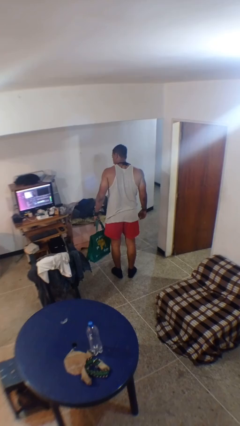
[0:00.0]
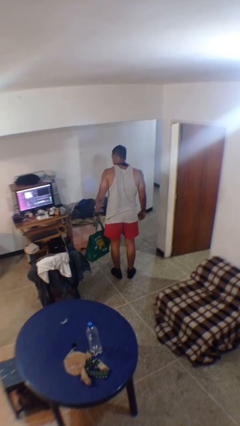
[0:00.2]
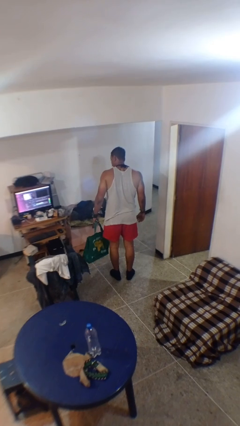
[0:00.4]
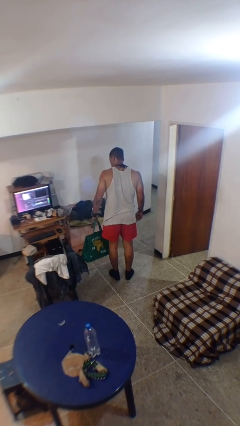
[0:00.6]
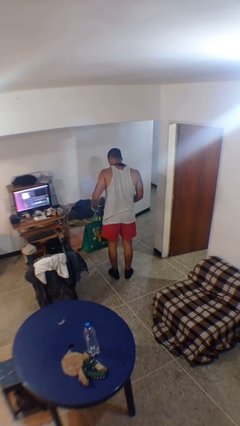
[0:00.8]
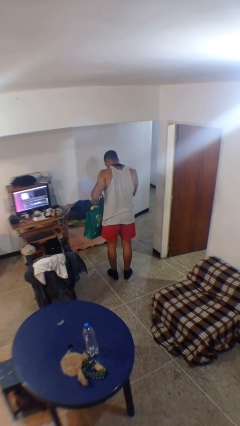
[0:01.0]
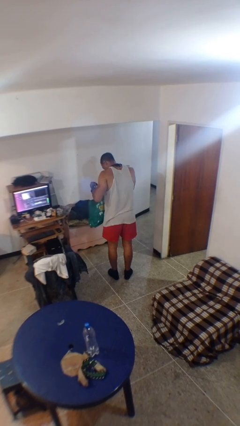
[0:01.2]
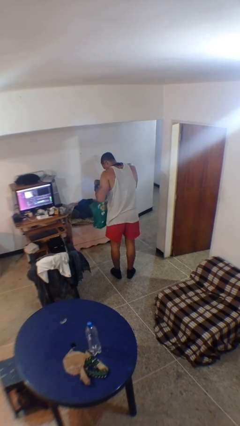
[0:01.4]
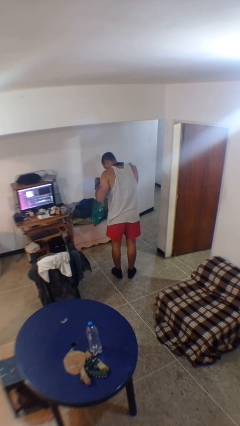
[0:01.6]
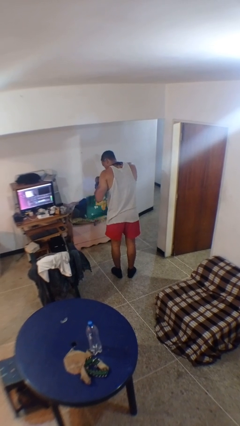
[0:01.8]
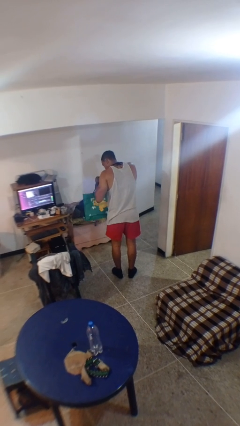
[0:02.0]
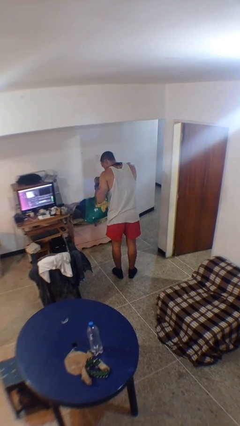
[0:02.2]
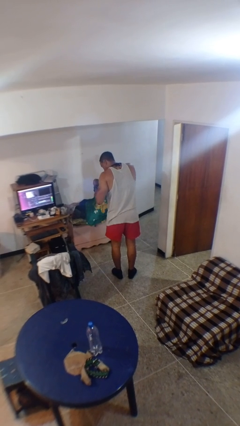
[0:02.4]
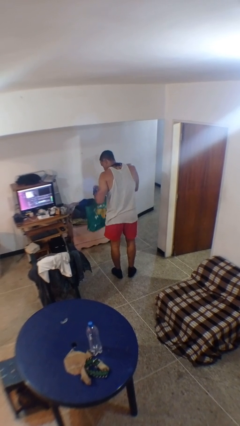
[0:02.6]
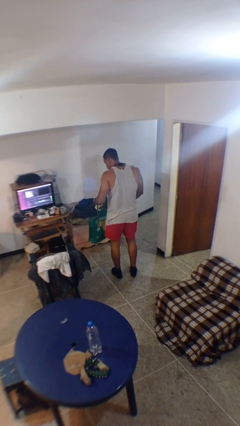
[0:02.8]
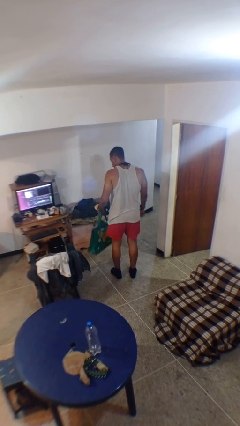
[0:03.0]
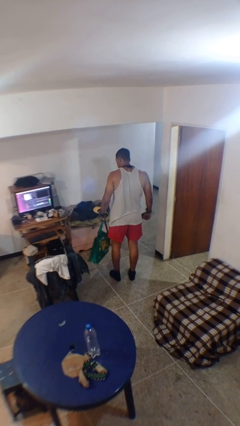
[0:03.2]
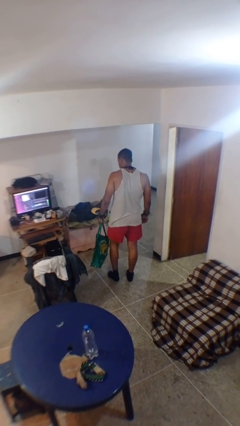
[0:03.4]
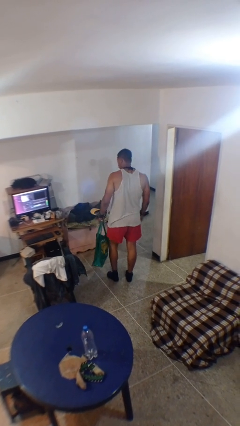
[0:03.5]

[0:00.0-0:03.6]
person searches in bag

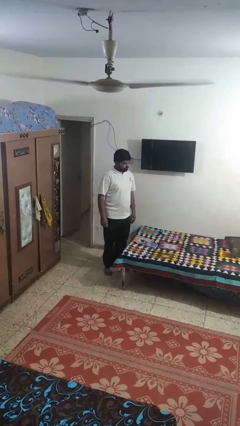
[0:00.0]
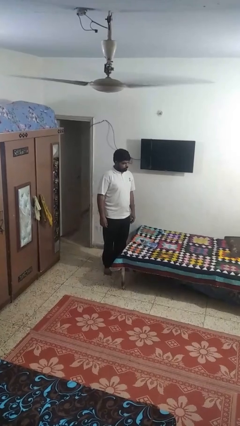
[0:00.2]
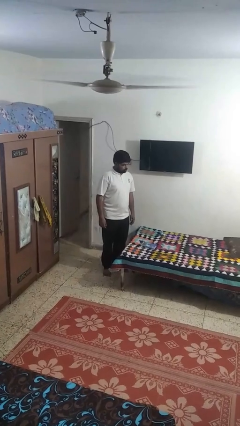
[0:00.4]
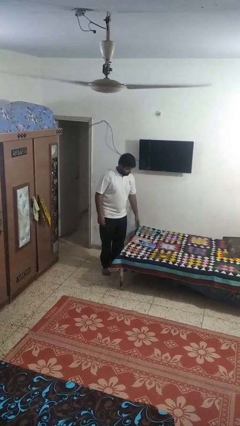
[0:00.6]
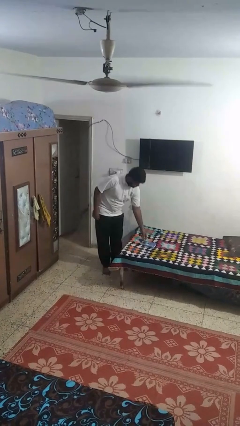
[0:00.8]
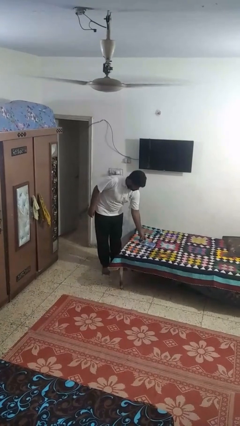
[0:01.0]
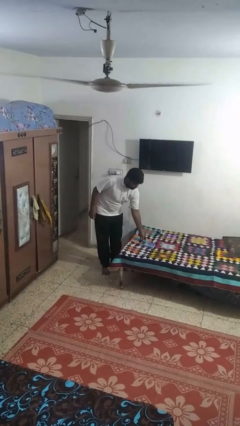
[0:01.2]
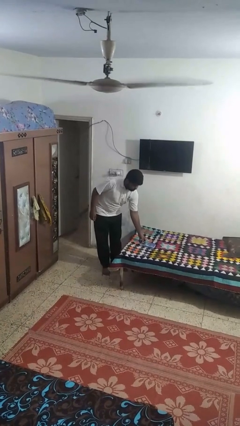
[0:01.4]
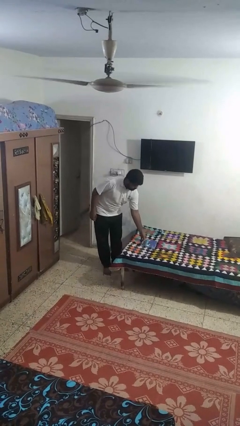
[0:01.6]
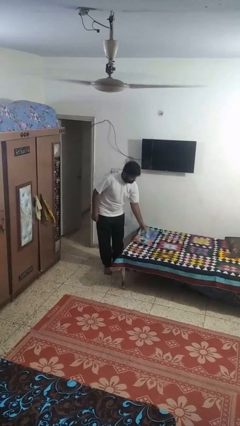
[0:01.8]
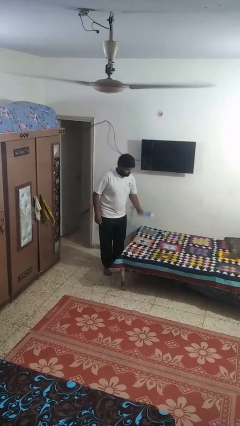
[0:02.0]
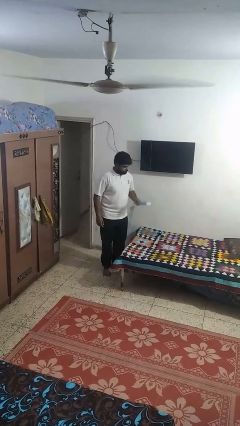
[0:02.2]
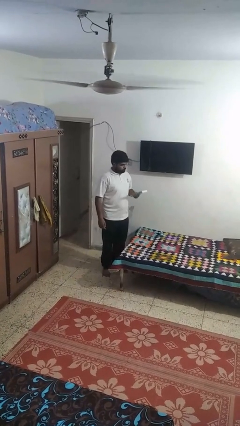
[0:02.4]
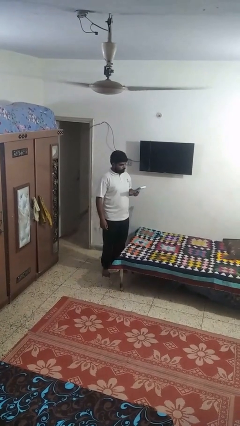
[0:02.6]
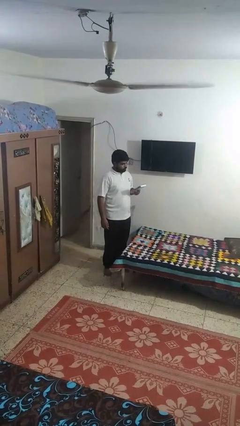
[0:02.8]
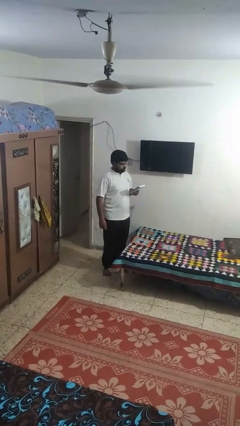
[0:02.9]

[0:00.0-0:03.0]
person picks up object from bed

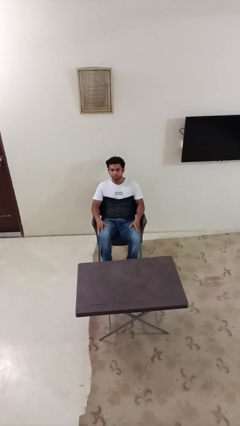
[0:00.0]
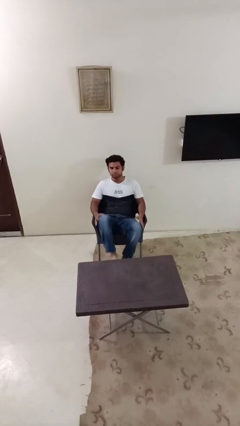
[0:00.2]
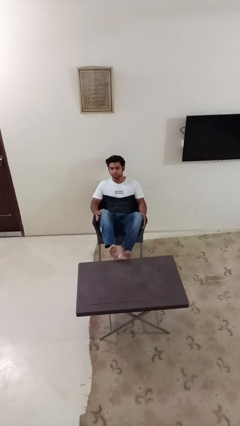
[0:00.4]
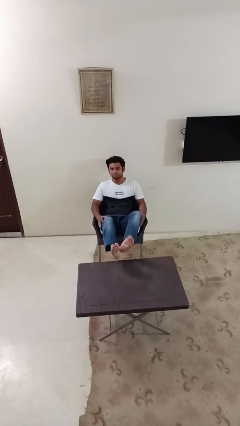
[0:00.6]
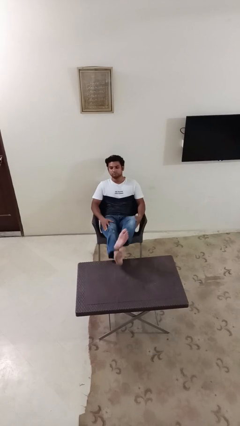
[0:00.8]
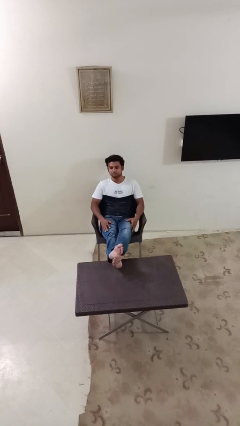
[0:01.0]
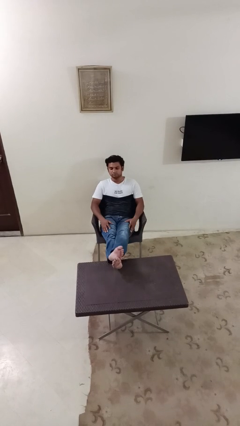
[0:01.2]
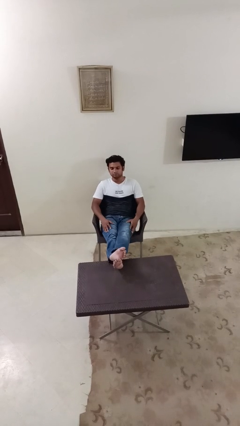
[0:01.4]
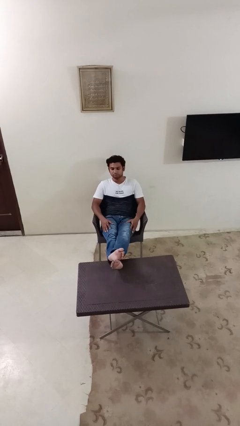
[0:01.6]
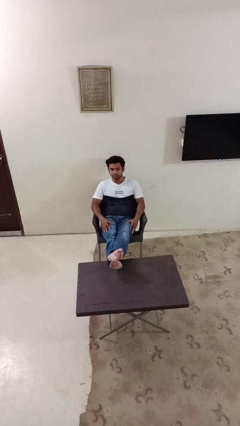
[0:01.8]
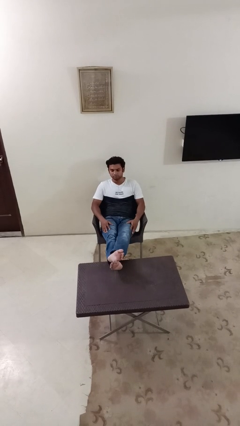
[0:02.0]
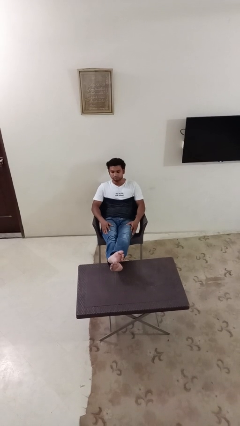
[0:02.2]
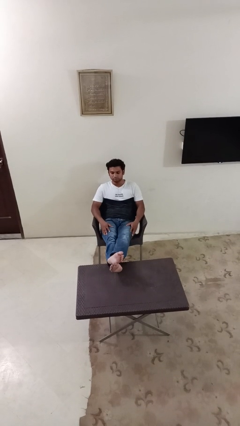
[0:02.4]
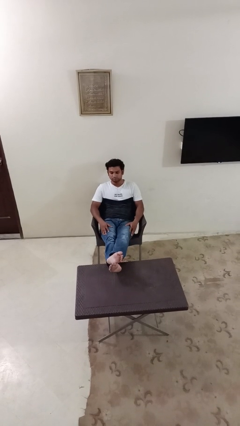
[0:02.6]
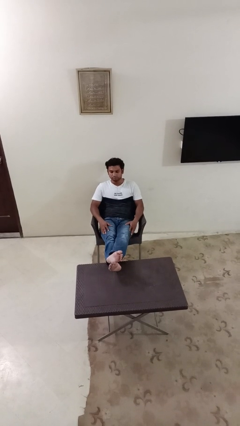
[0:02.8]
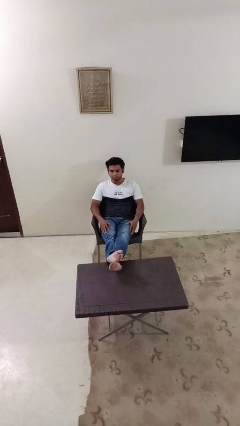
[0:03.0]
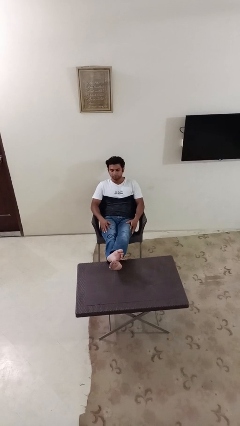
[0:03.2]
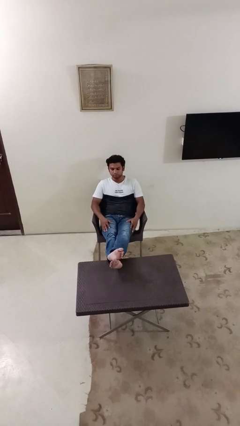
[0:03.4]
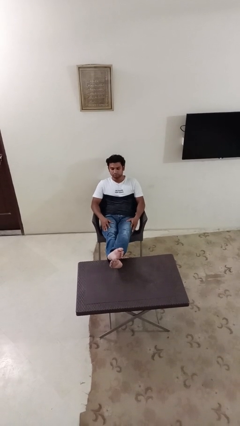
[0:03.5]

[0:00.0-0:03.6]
person puts feet up

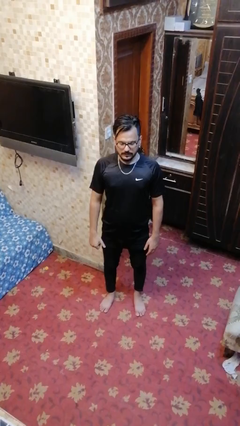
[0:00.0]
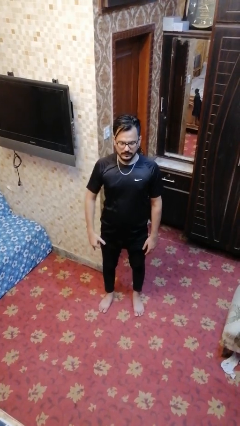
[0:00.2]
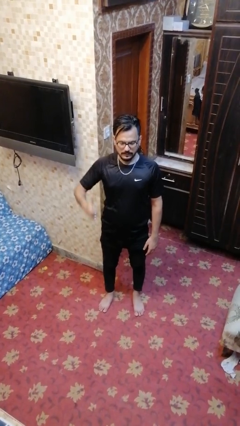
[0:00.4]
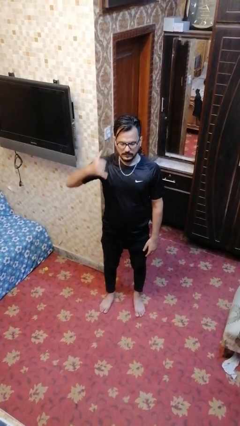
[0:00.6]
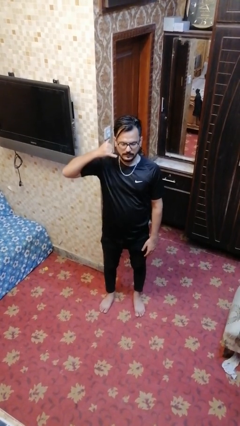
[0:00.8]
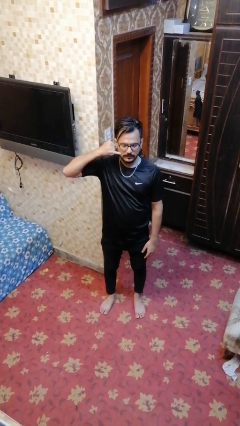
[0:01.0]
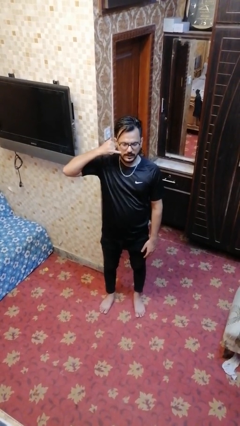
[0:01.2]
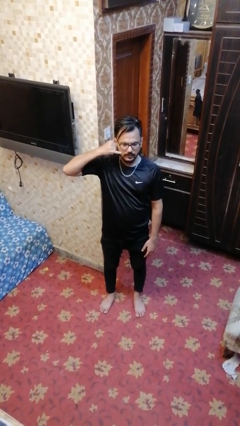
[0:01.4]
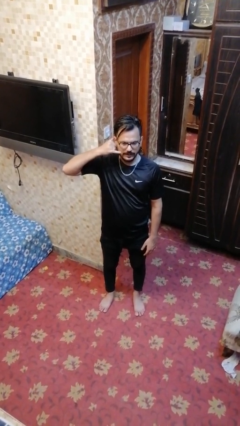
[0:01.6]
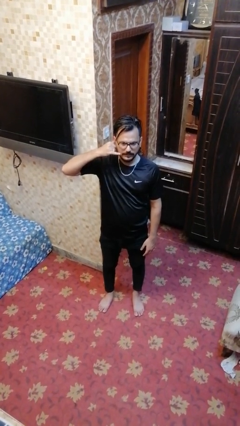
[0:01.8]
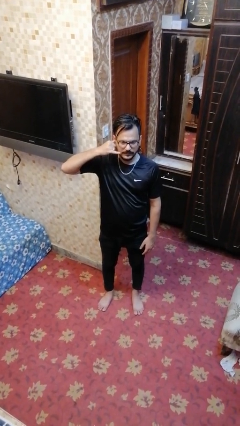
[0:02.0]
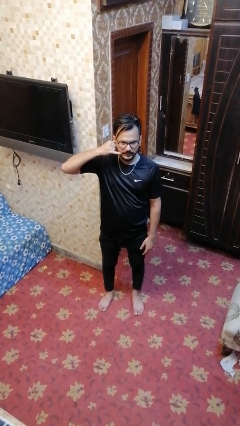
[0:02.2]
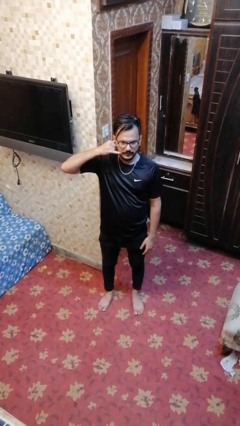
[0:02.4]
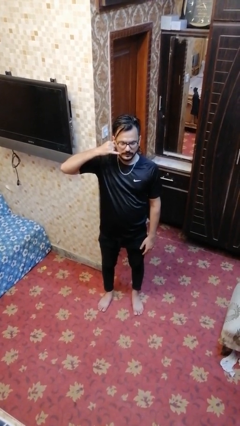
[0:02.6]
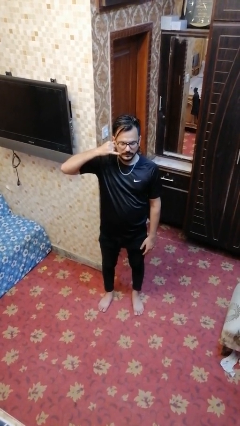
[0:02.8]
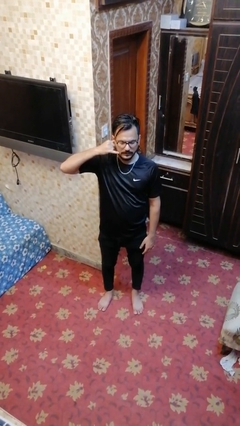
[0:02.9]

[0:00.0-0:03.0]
person gestures call me

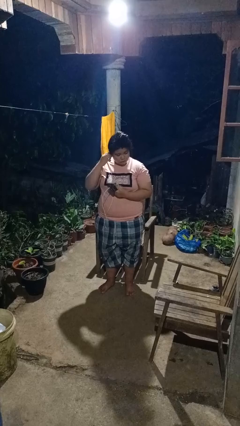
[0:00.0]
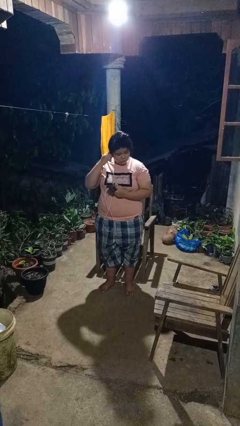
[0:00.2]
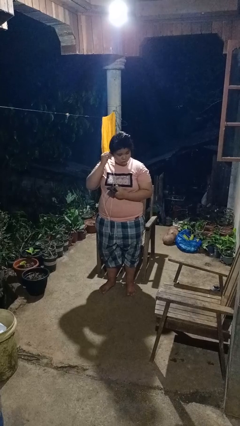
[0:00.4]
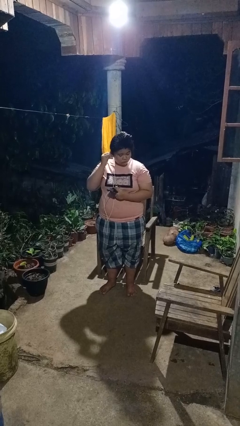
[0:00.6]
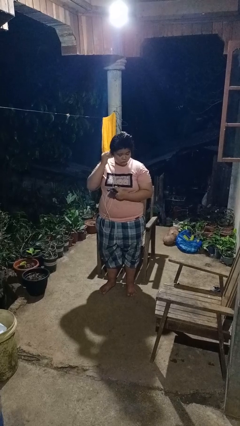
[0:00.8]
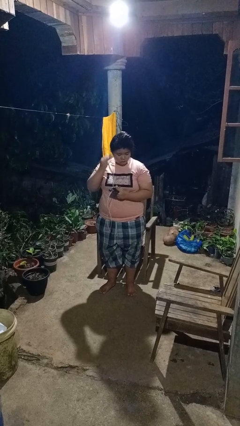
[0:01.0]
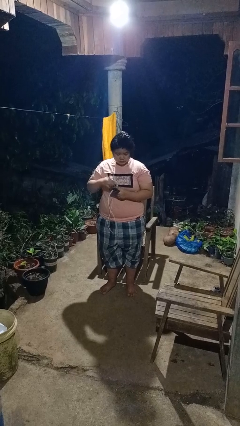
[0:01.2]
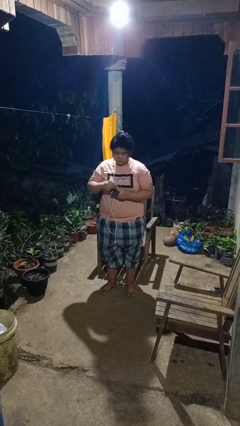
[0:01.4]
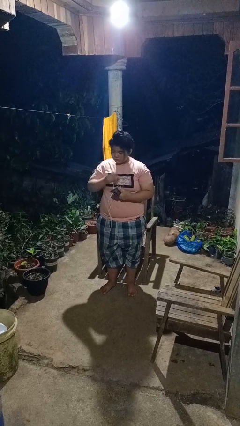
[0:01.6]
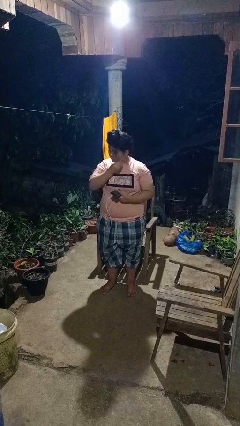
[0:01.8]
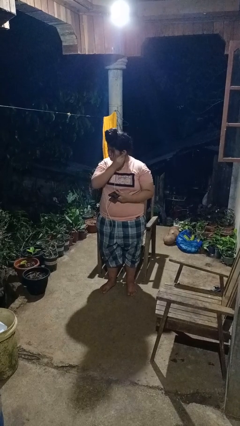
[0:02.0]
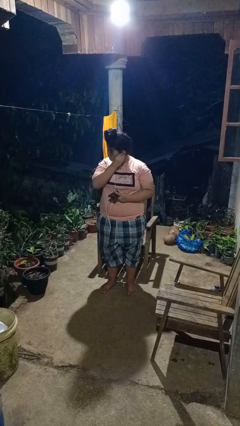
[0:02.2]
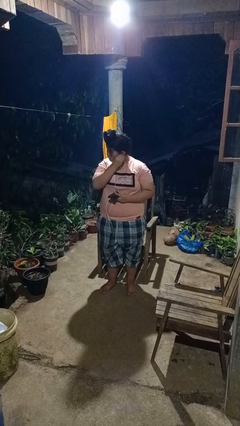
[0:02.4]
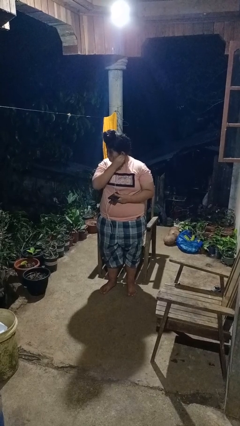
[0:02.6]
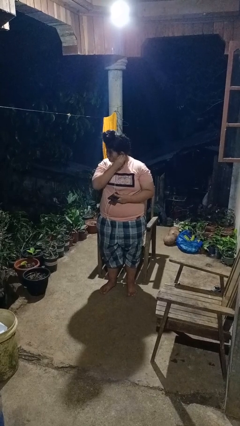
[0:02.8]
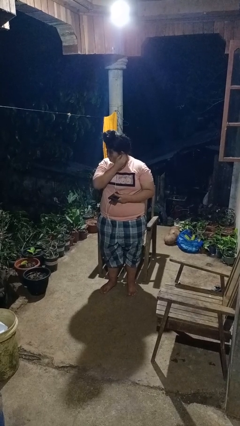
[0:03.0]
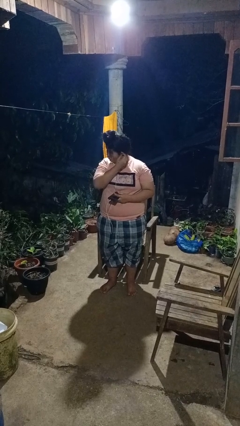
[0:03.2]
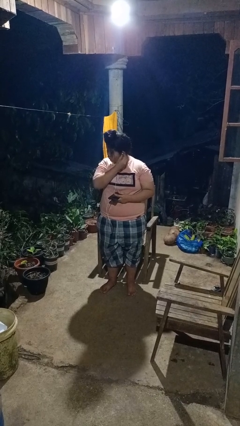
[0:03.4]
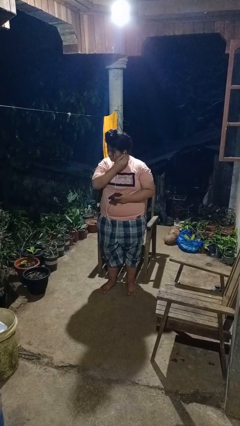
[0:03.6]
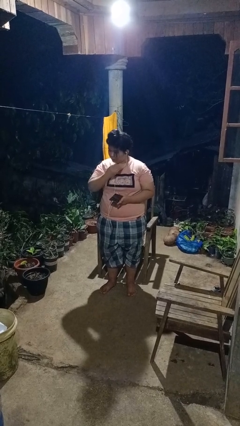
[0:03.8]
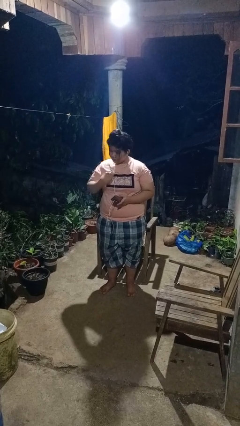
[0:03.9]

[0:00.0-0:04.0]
person puts on headphones

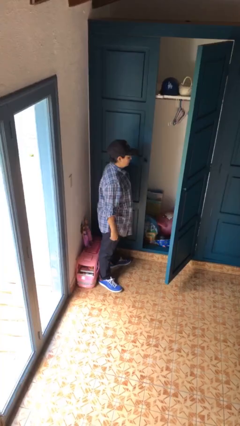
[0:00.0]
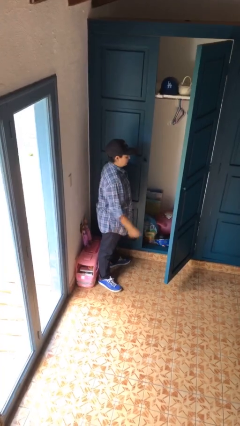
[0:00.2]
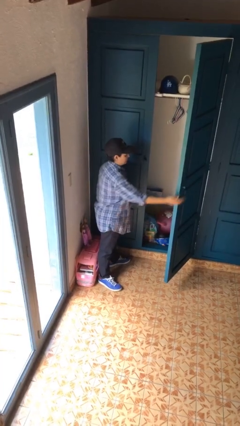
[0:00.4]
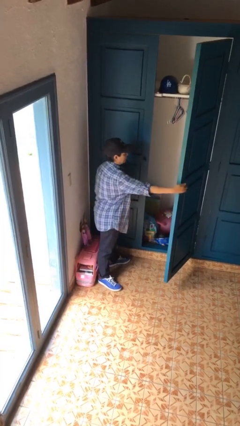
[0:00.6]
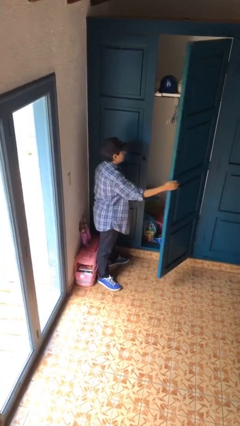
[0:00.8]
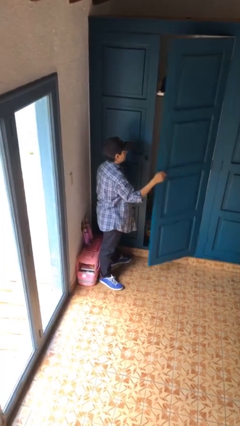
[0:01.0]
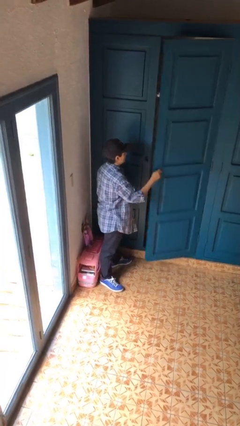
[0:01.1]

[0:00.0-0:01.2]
person closes closet door
